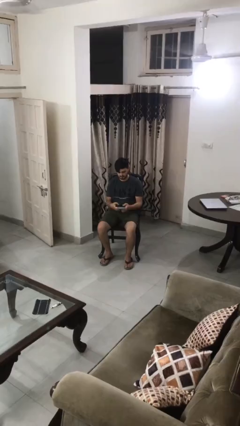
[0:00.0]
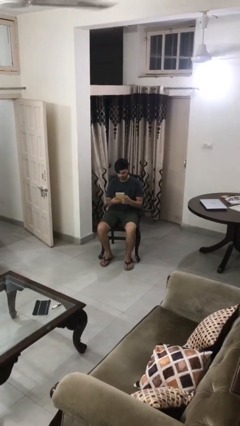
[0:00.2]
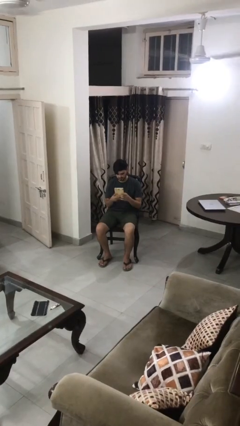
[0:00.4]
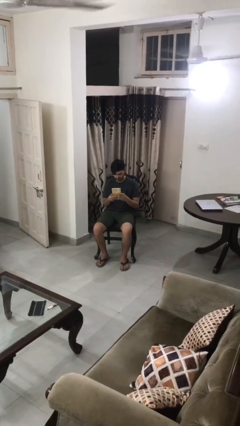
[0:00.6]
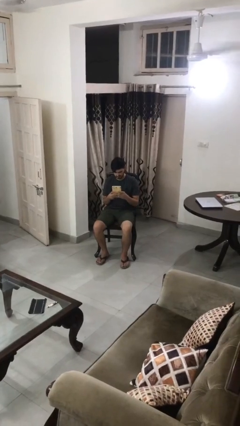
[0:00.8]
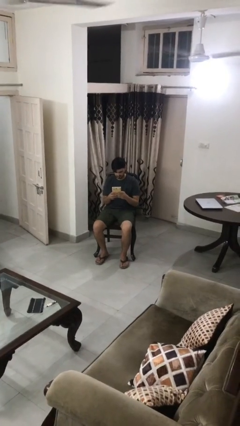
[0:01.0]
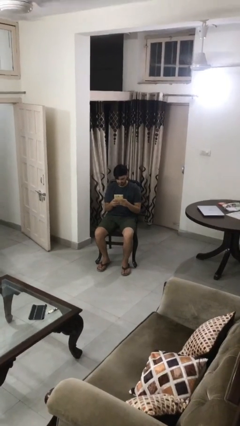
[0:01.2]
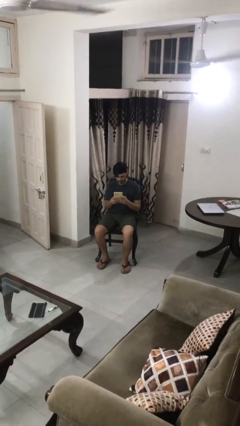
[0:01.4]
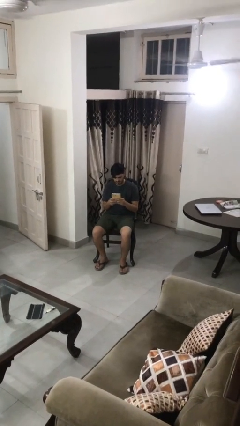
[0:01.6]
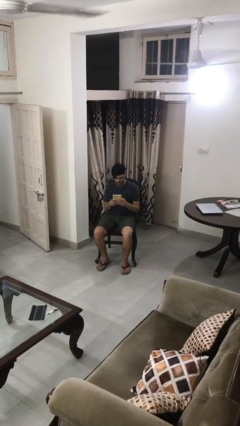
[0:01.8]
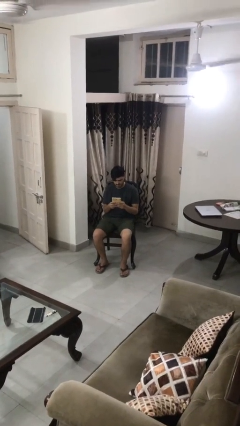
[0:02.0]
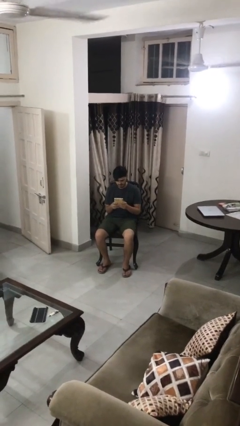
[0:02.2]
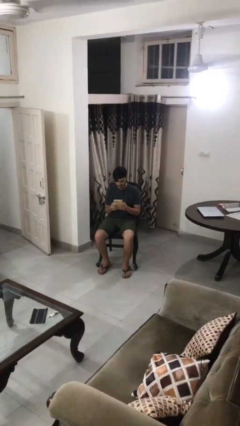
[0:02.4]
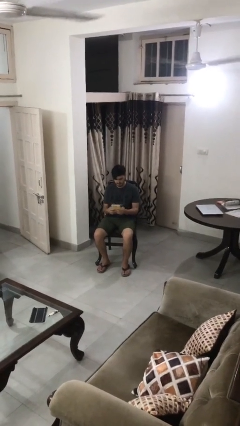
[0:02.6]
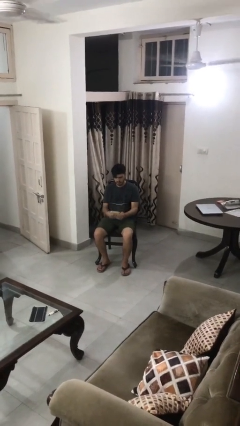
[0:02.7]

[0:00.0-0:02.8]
person interacts with tablet

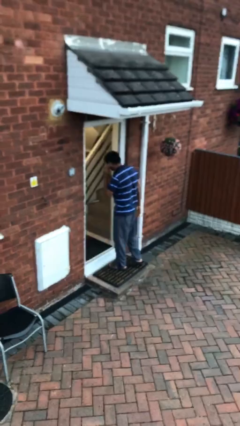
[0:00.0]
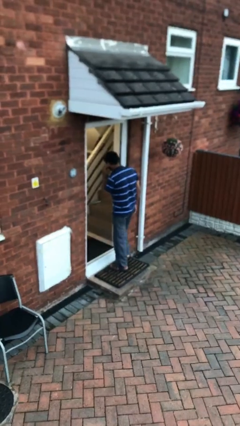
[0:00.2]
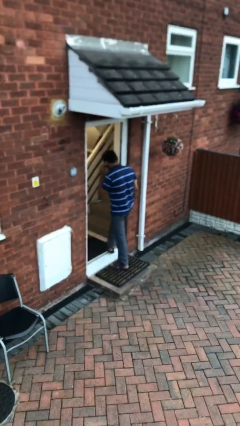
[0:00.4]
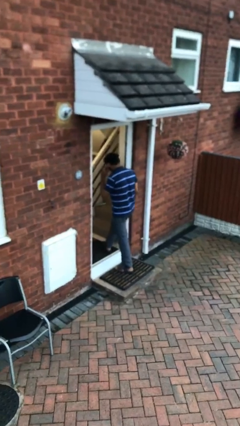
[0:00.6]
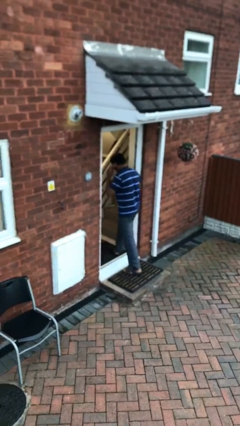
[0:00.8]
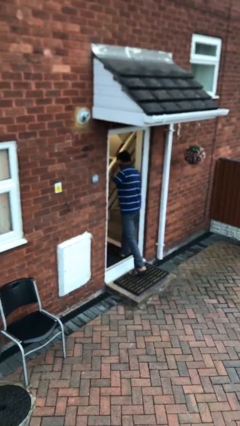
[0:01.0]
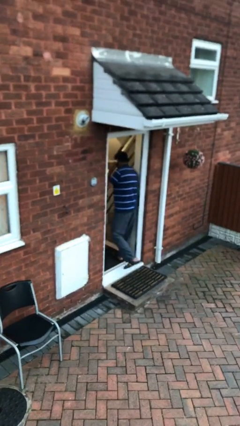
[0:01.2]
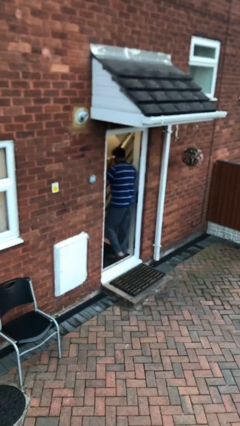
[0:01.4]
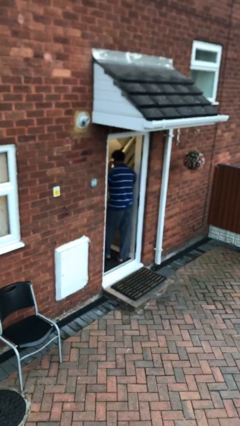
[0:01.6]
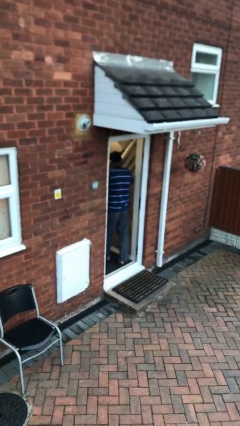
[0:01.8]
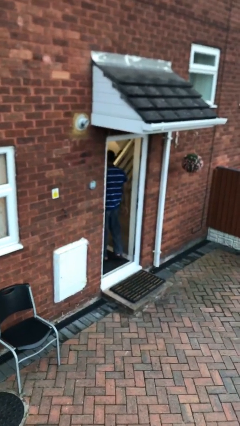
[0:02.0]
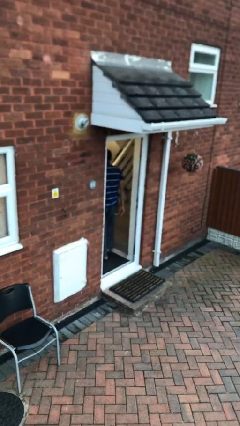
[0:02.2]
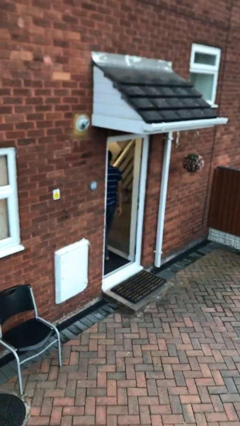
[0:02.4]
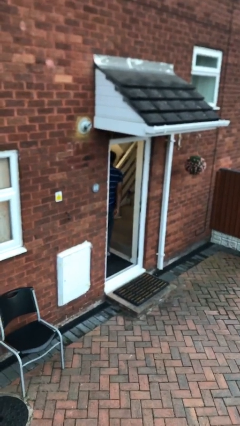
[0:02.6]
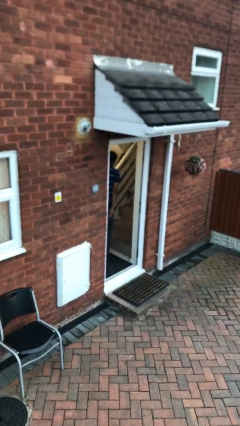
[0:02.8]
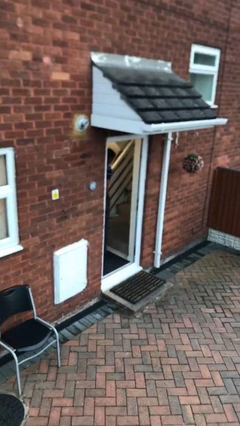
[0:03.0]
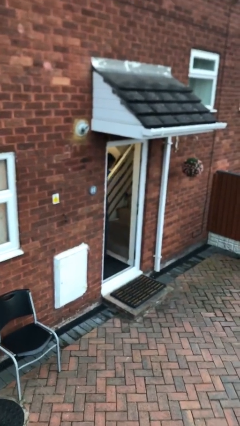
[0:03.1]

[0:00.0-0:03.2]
person exits scene through structure

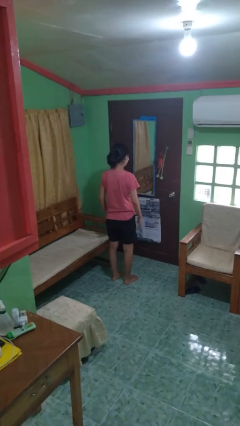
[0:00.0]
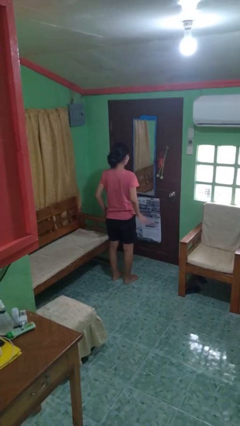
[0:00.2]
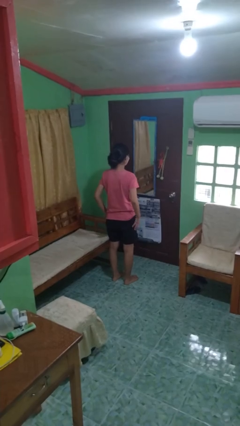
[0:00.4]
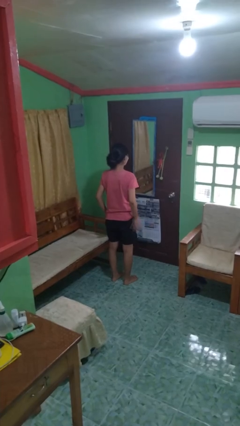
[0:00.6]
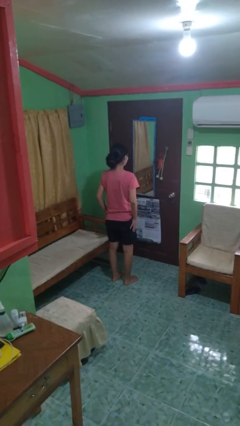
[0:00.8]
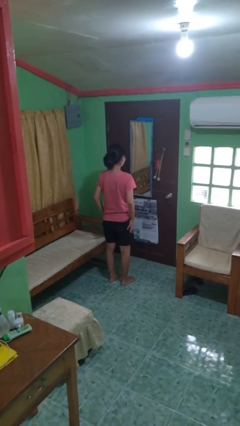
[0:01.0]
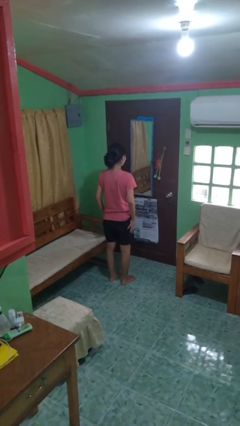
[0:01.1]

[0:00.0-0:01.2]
person slaps hands on thighs

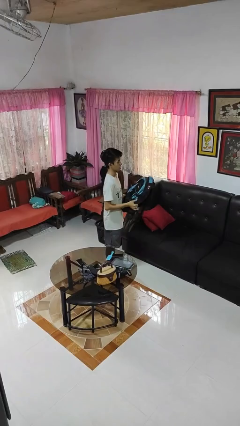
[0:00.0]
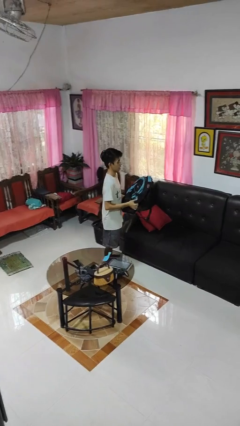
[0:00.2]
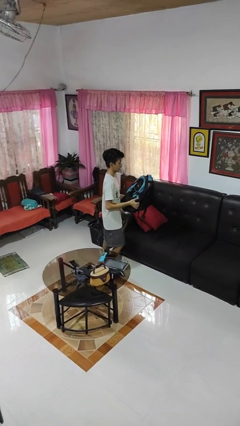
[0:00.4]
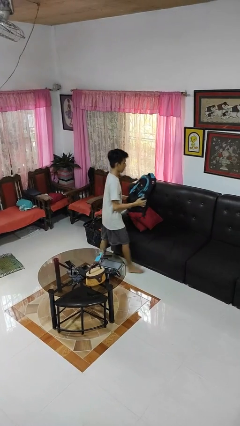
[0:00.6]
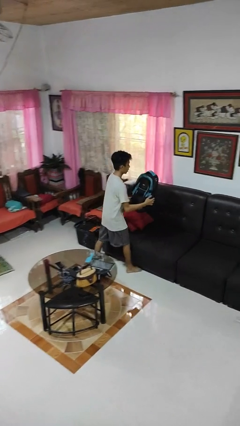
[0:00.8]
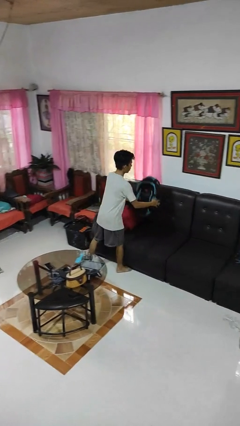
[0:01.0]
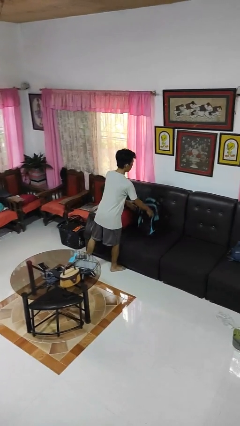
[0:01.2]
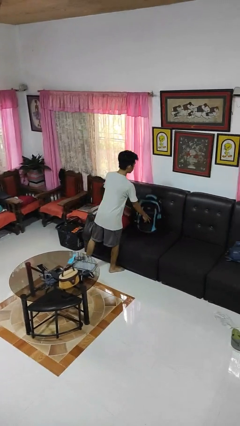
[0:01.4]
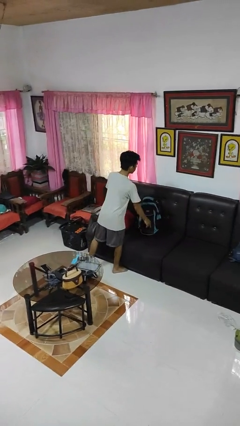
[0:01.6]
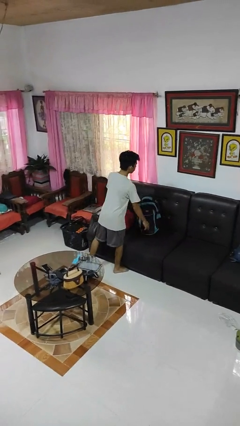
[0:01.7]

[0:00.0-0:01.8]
person puts down object on couch

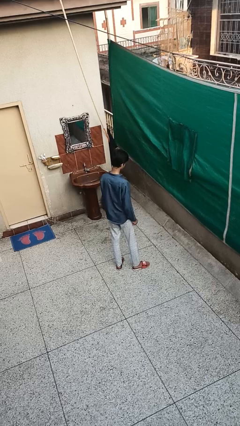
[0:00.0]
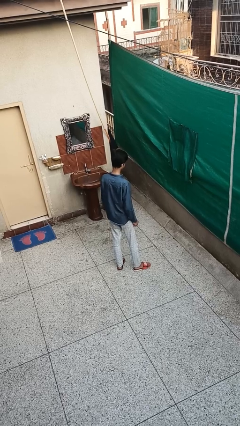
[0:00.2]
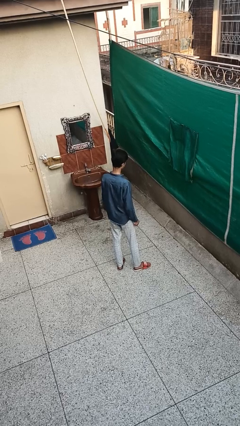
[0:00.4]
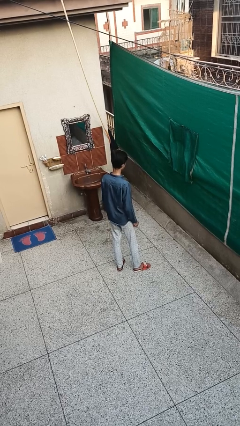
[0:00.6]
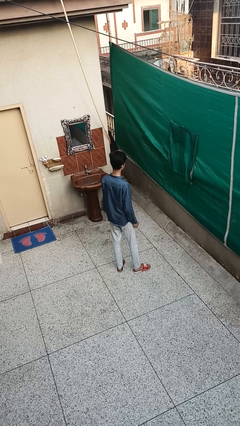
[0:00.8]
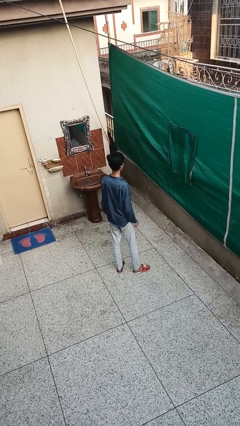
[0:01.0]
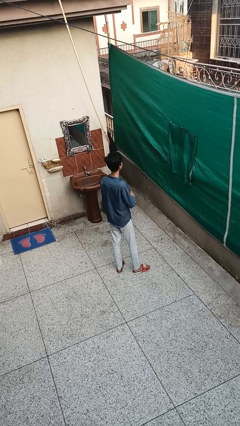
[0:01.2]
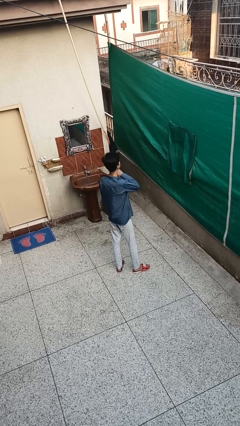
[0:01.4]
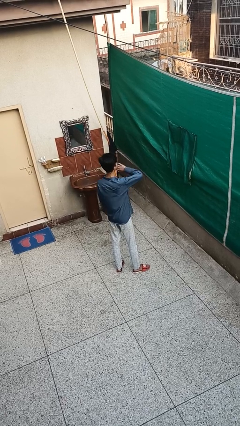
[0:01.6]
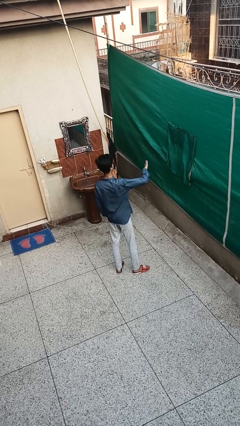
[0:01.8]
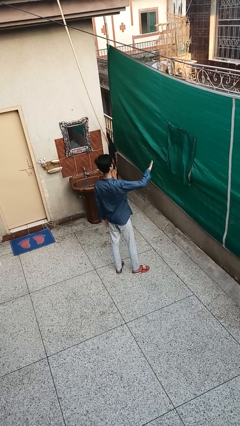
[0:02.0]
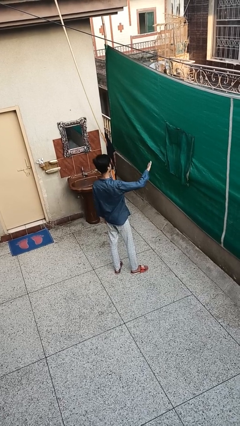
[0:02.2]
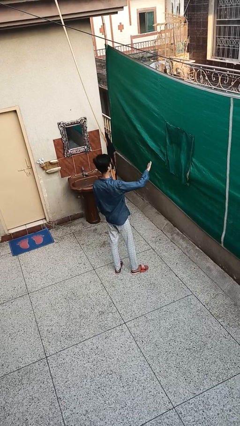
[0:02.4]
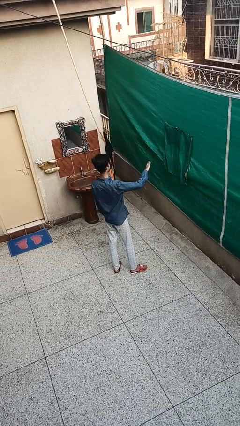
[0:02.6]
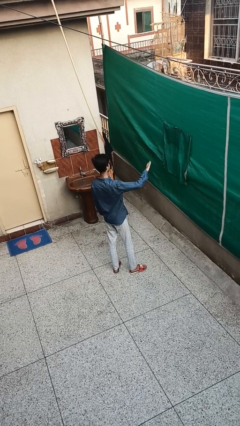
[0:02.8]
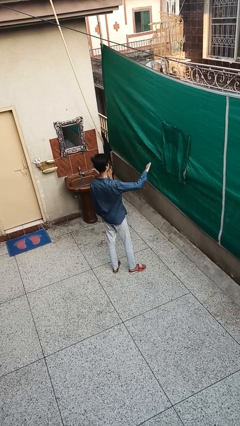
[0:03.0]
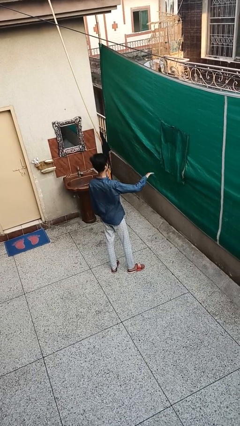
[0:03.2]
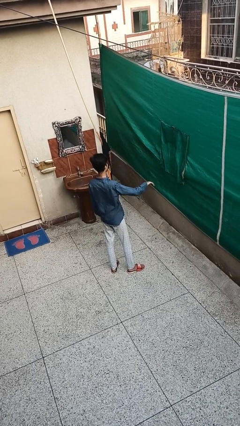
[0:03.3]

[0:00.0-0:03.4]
person gestures swipe right

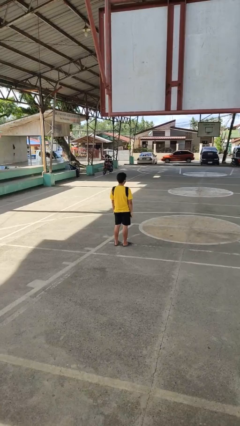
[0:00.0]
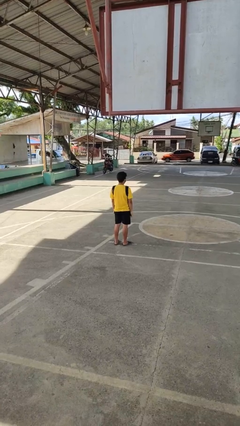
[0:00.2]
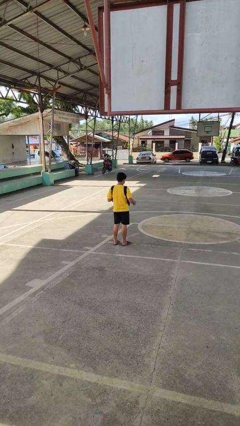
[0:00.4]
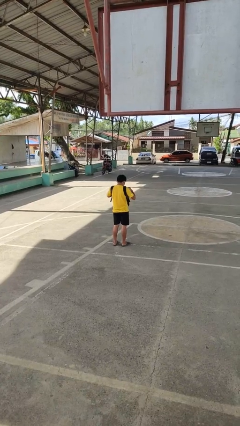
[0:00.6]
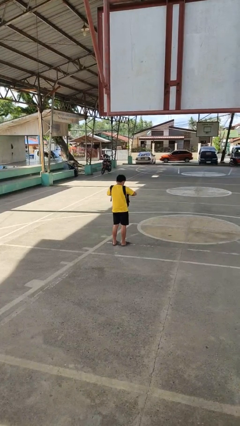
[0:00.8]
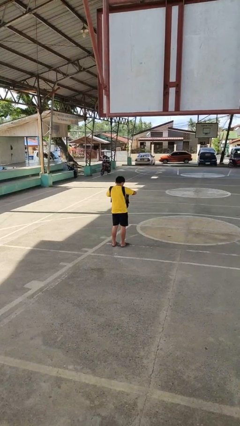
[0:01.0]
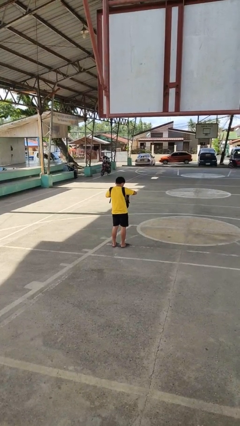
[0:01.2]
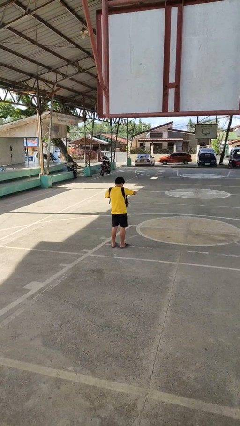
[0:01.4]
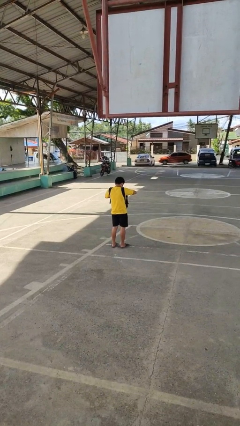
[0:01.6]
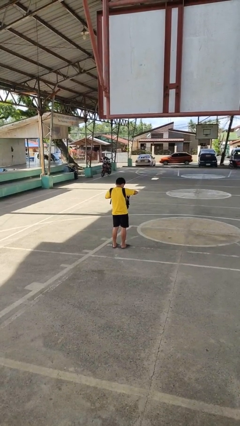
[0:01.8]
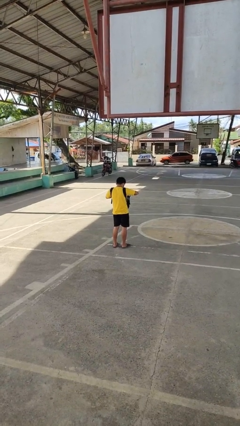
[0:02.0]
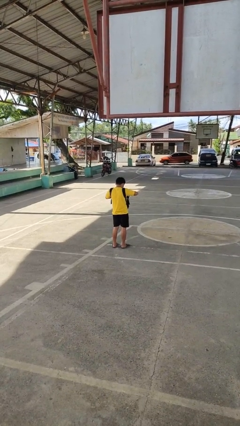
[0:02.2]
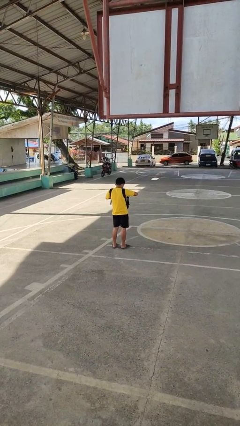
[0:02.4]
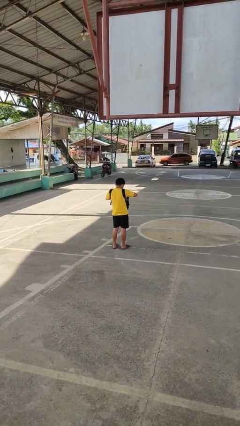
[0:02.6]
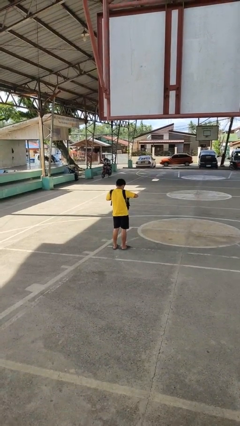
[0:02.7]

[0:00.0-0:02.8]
person searches in backpack

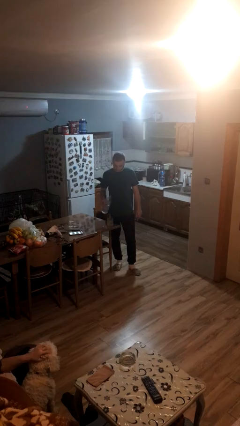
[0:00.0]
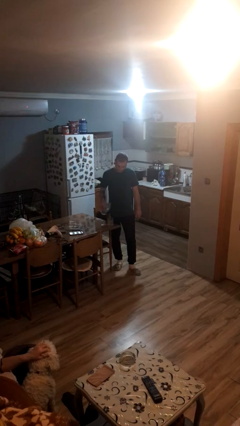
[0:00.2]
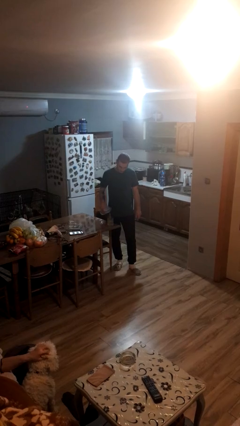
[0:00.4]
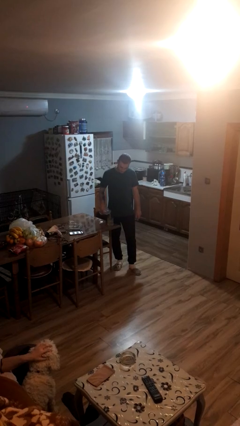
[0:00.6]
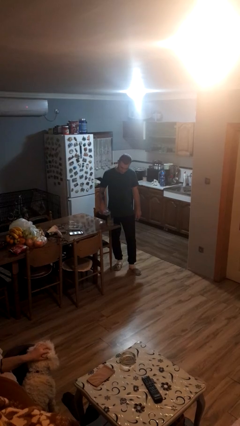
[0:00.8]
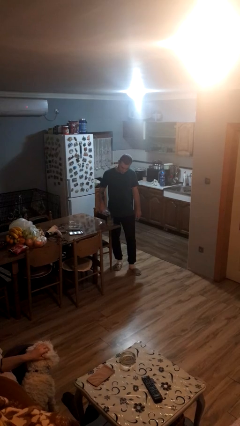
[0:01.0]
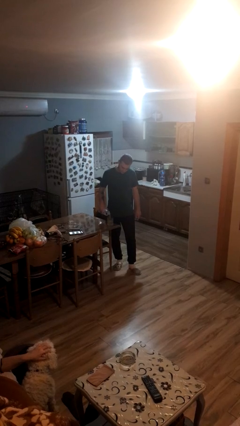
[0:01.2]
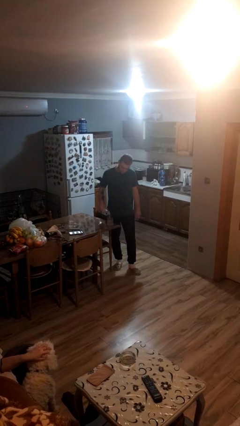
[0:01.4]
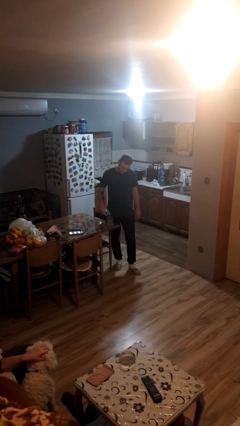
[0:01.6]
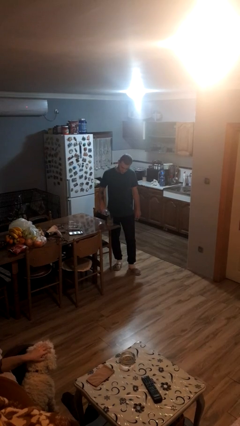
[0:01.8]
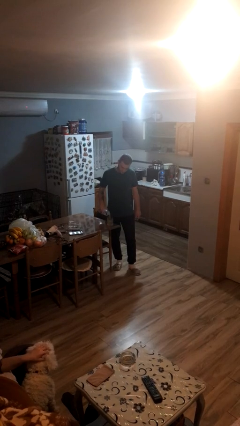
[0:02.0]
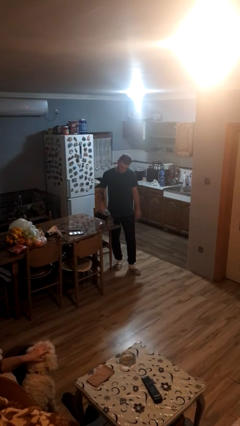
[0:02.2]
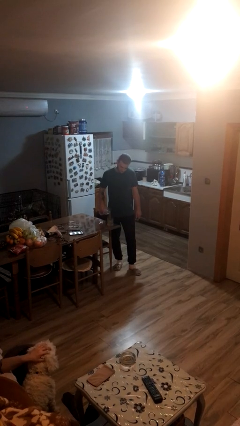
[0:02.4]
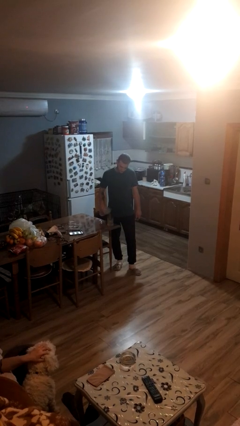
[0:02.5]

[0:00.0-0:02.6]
person pours liquid into cup
